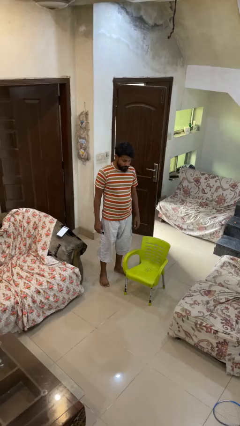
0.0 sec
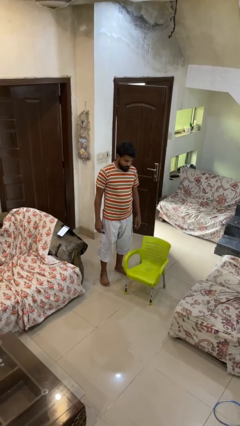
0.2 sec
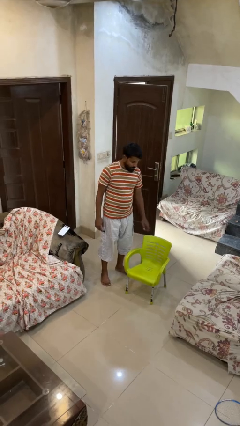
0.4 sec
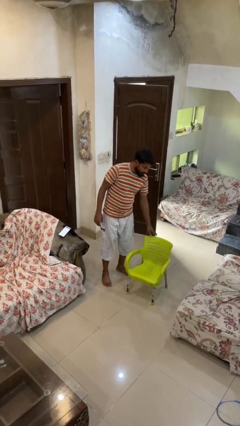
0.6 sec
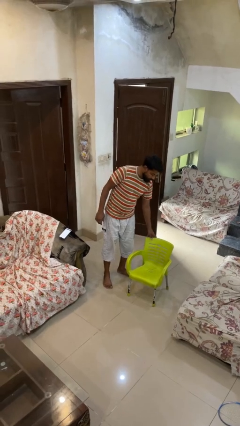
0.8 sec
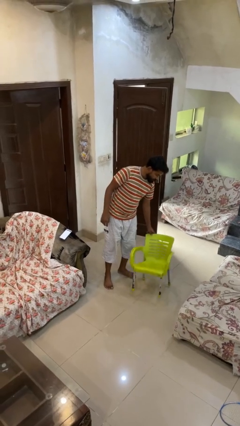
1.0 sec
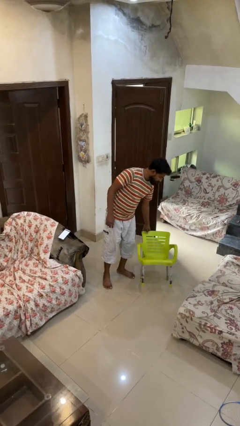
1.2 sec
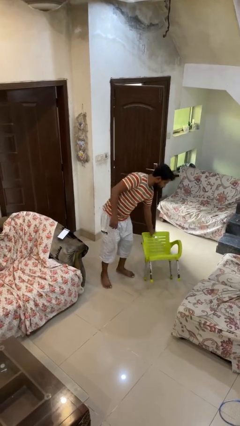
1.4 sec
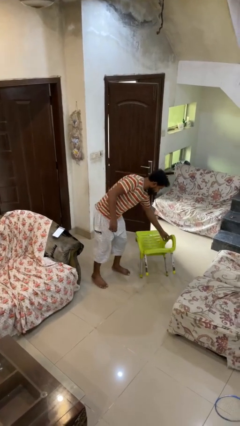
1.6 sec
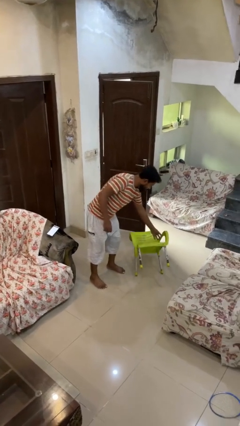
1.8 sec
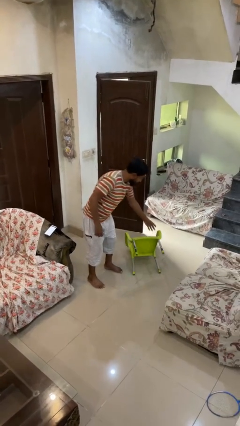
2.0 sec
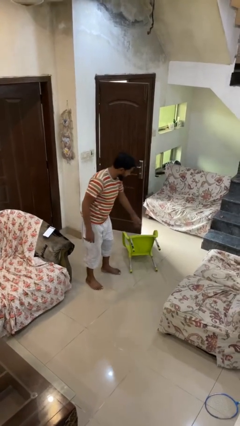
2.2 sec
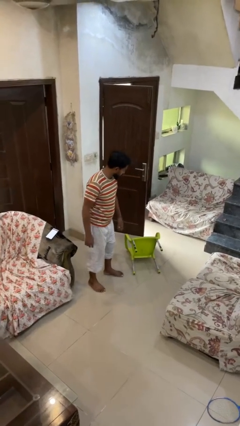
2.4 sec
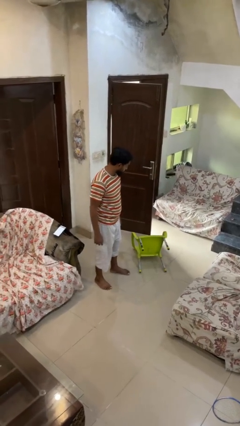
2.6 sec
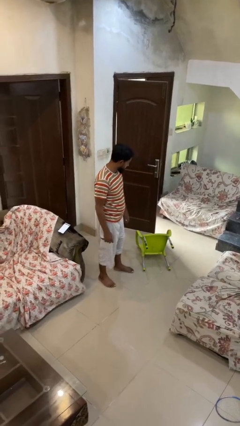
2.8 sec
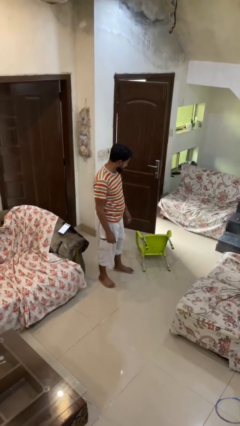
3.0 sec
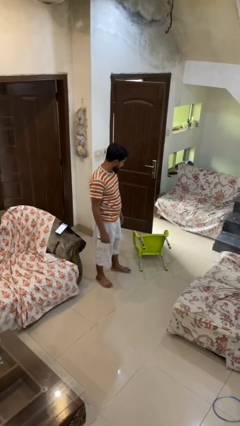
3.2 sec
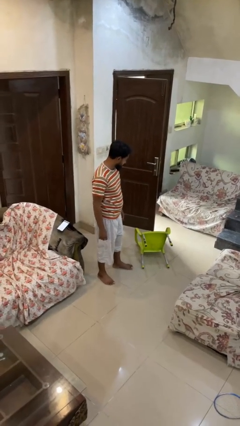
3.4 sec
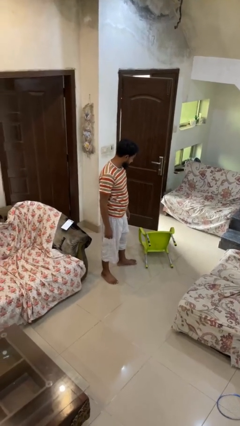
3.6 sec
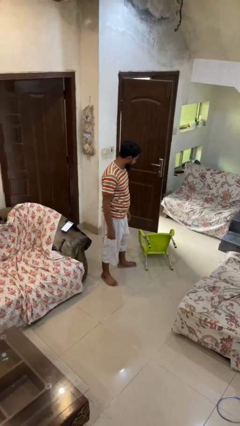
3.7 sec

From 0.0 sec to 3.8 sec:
person knocks over furniture

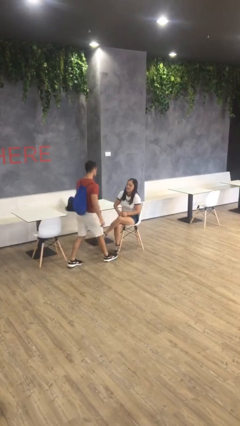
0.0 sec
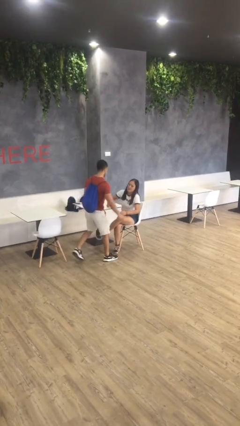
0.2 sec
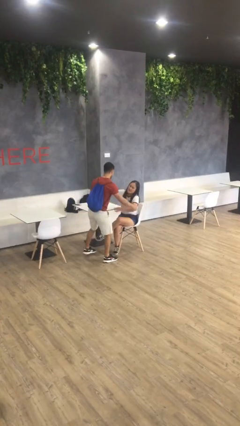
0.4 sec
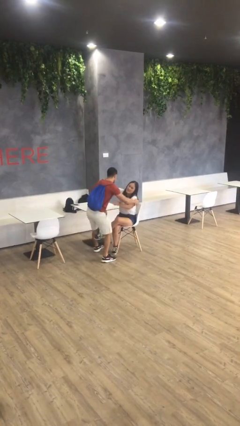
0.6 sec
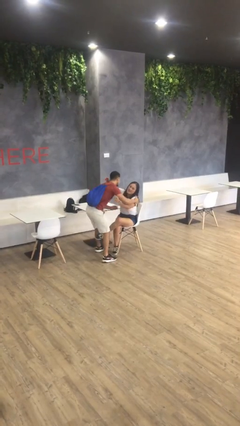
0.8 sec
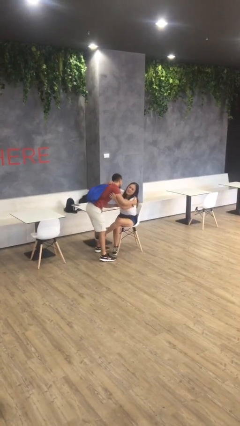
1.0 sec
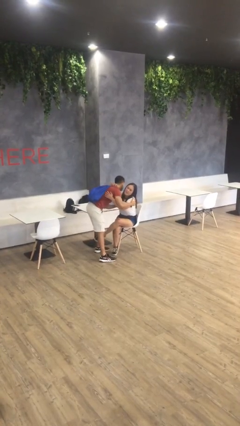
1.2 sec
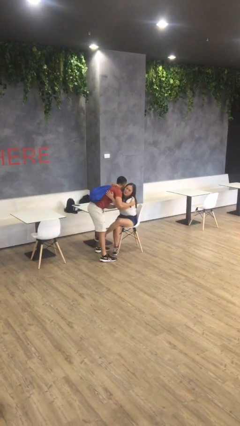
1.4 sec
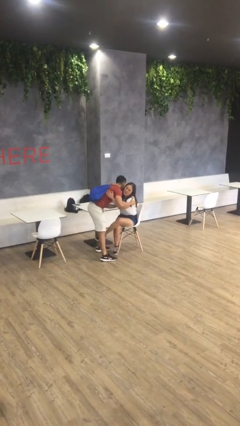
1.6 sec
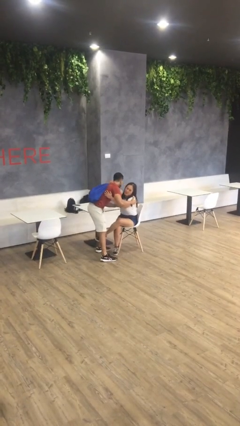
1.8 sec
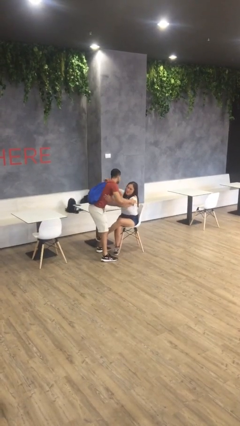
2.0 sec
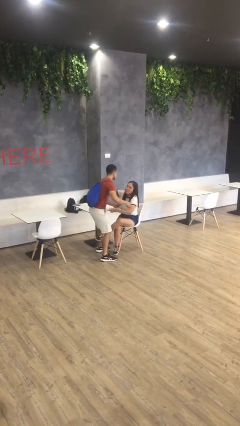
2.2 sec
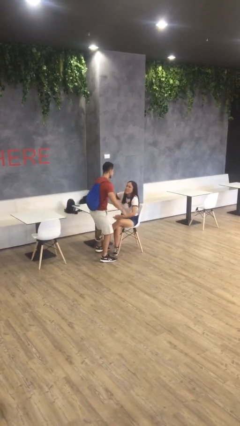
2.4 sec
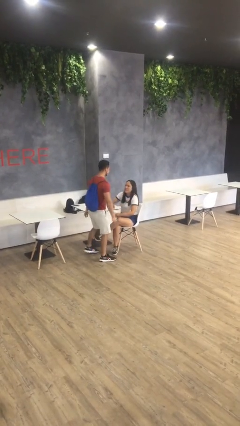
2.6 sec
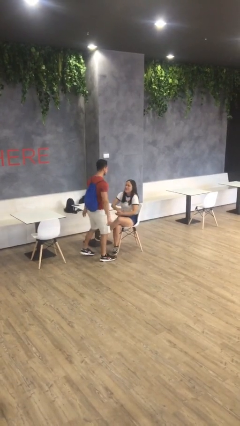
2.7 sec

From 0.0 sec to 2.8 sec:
person embraces person

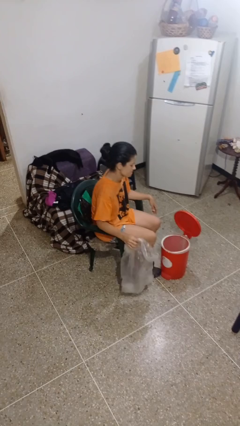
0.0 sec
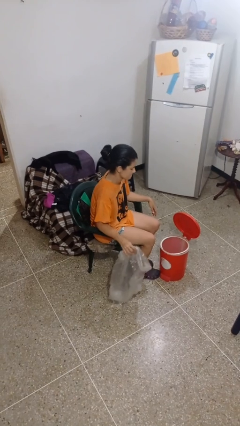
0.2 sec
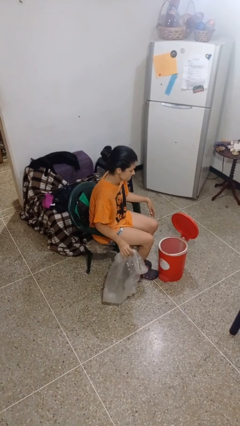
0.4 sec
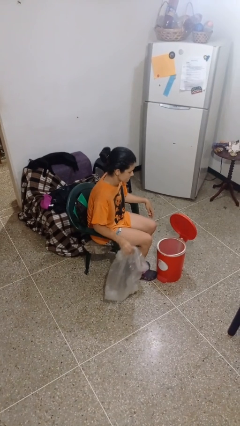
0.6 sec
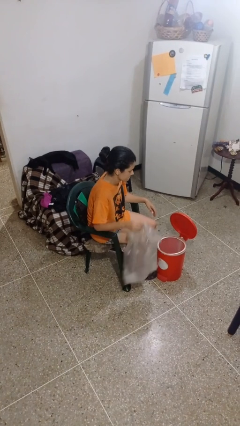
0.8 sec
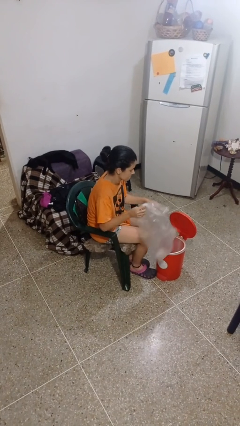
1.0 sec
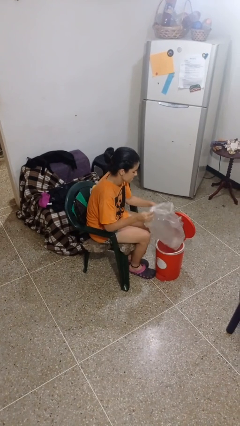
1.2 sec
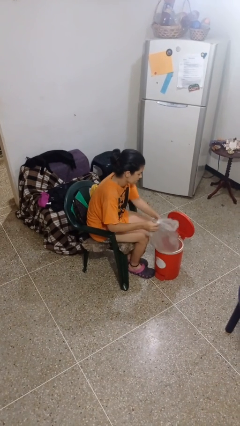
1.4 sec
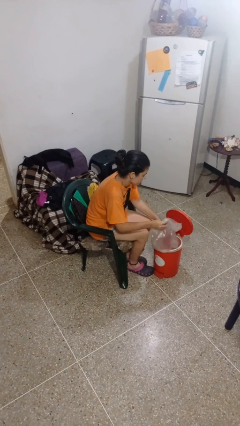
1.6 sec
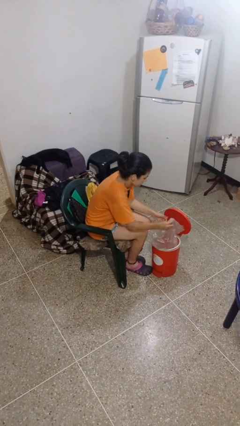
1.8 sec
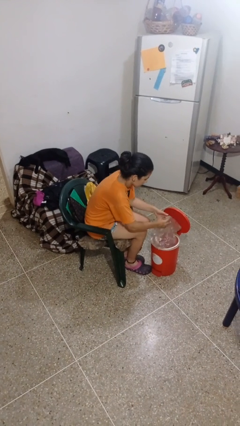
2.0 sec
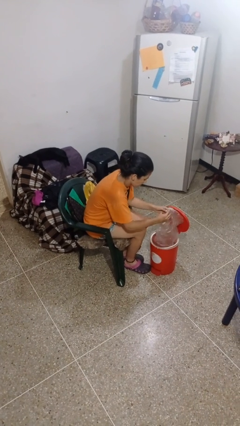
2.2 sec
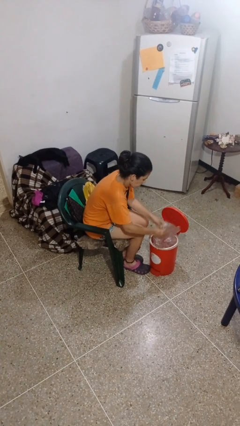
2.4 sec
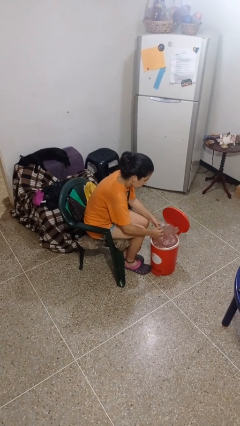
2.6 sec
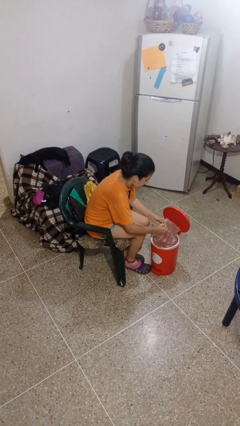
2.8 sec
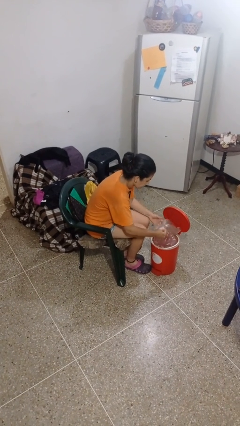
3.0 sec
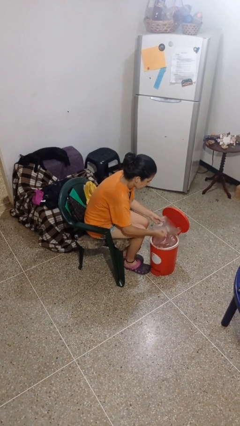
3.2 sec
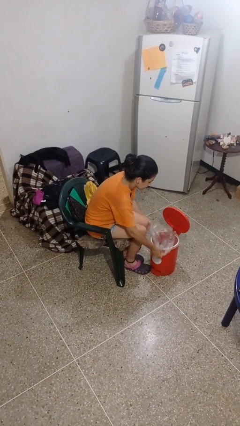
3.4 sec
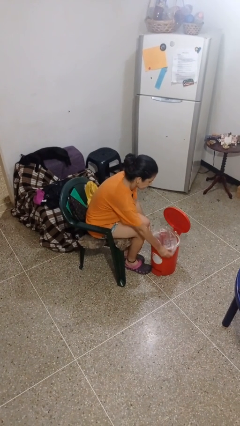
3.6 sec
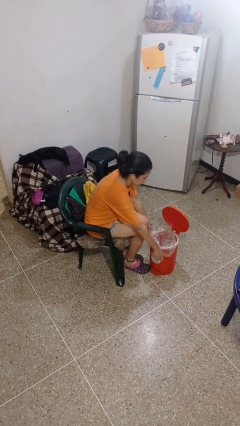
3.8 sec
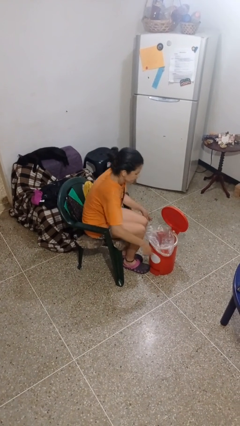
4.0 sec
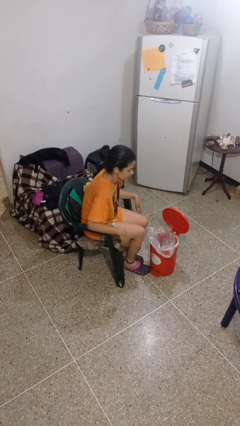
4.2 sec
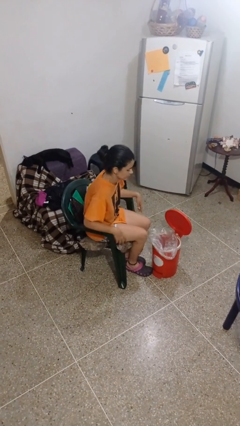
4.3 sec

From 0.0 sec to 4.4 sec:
person inserts trashbag into trashcan

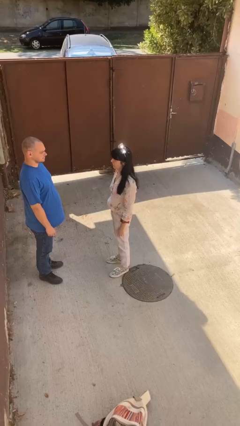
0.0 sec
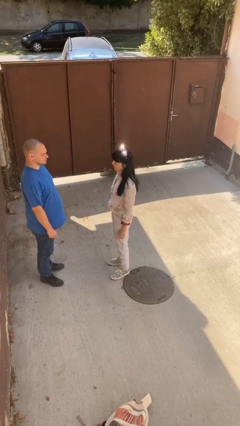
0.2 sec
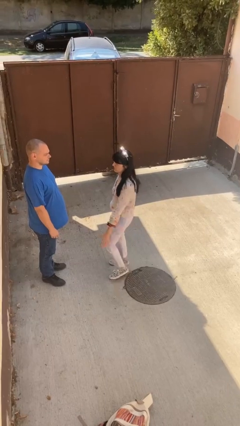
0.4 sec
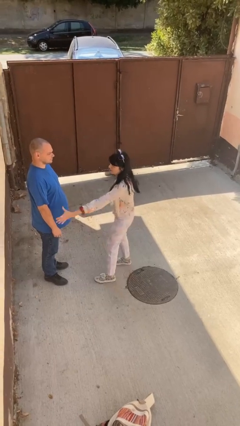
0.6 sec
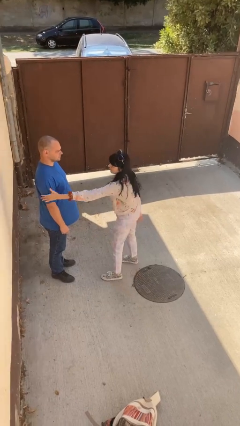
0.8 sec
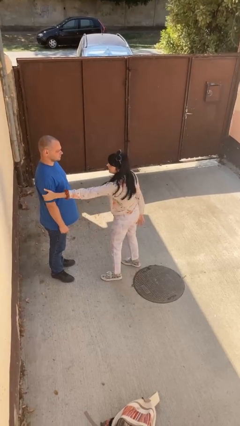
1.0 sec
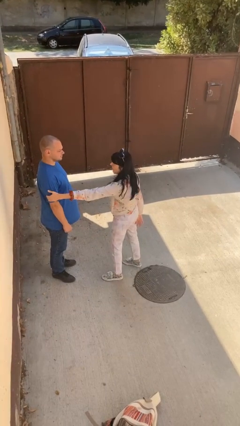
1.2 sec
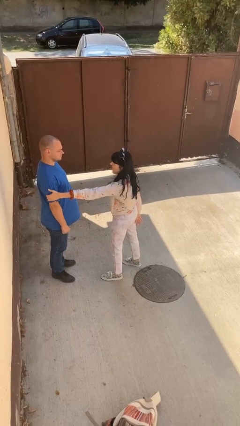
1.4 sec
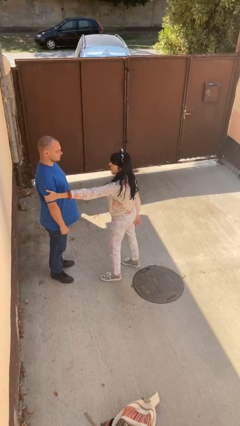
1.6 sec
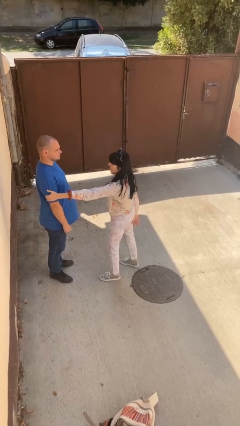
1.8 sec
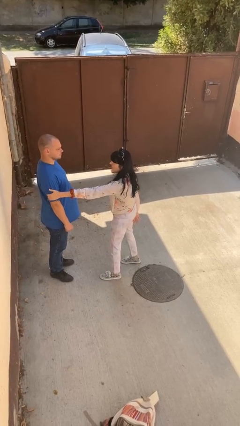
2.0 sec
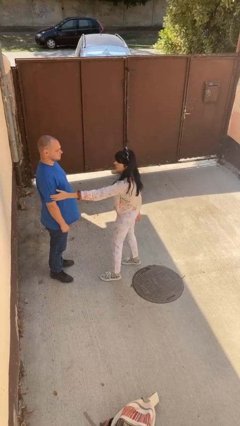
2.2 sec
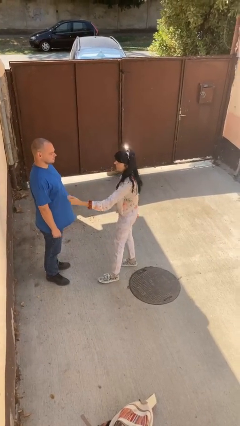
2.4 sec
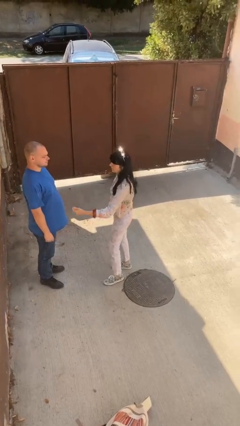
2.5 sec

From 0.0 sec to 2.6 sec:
person grabs person by bicep

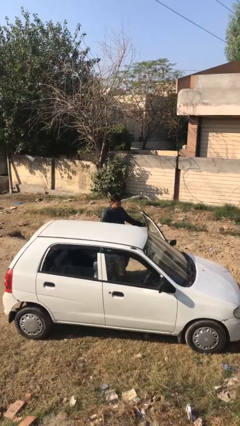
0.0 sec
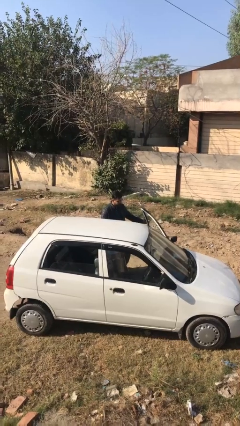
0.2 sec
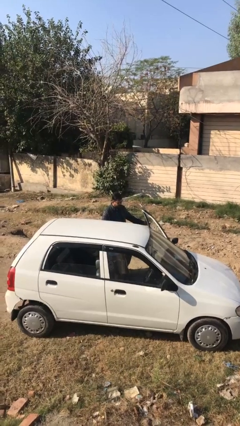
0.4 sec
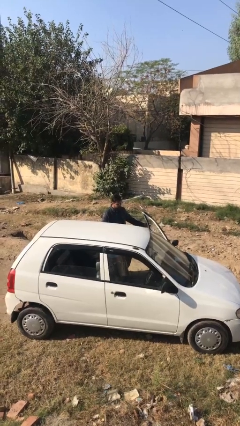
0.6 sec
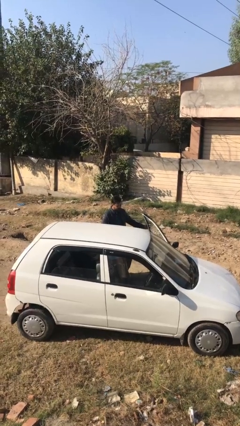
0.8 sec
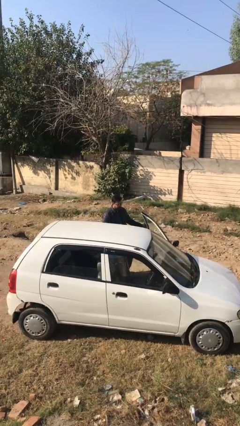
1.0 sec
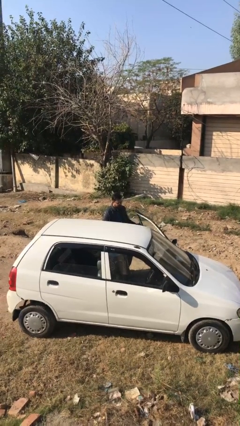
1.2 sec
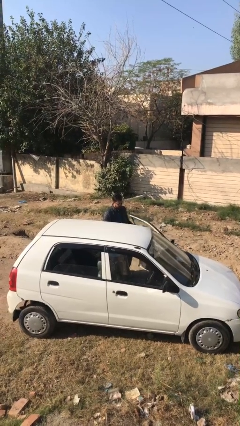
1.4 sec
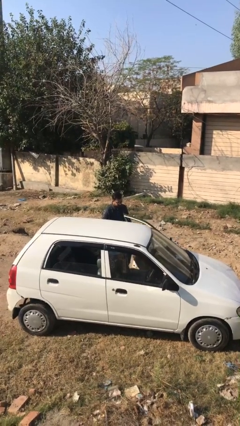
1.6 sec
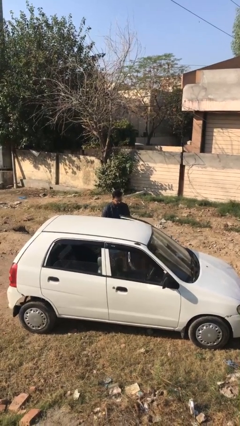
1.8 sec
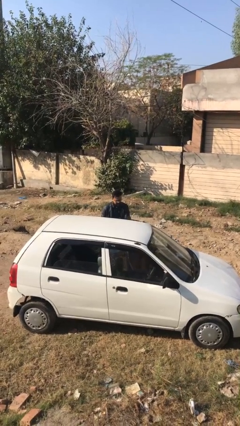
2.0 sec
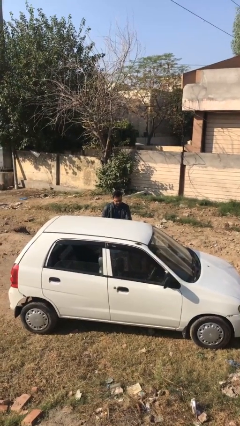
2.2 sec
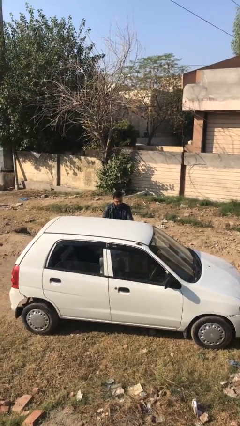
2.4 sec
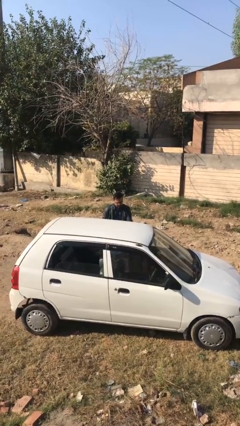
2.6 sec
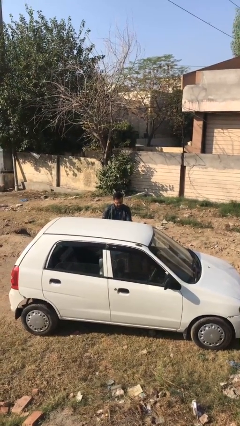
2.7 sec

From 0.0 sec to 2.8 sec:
person closes car door

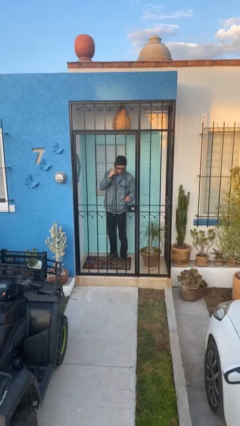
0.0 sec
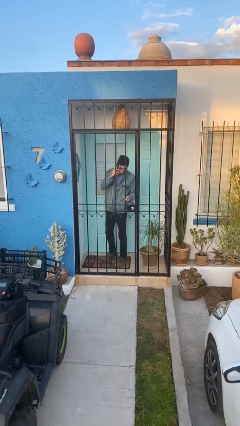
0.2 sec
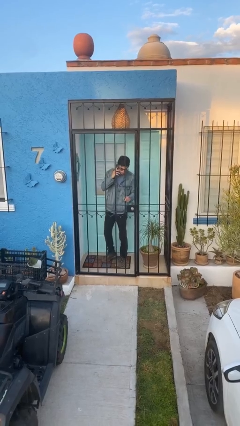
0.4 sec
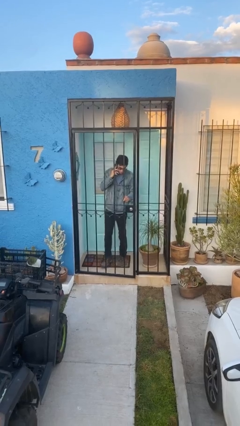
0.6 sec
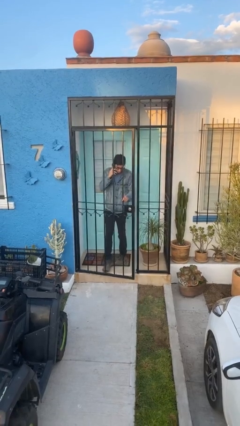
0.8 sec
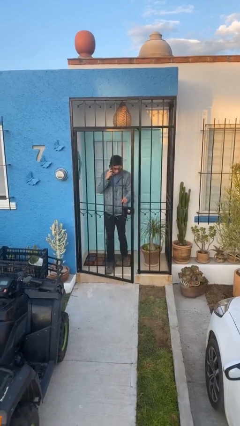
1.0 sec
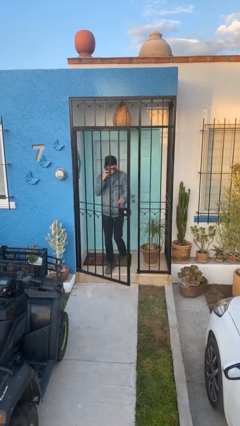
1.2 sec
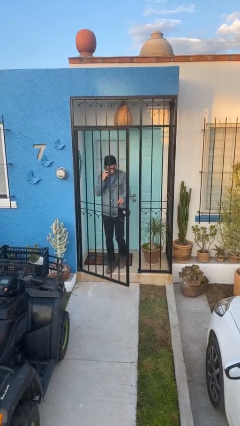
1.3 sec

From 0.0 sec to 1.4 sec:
person opens facility door
